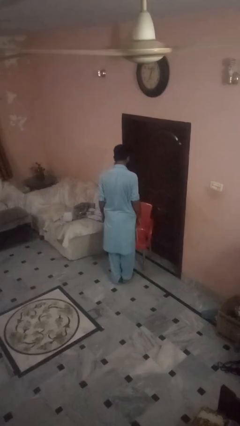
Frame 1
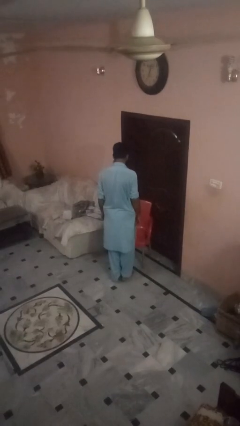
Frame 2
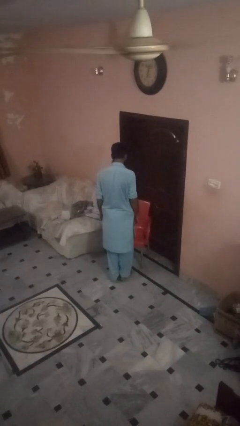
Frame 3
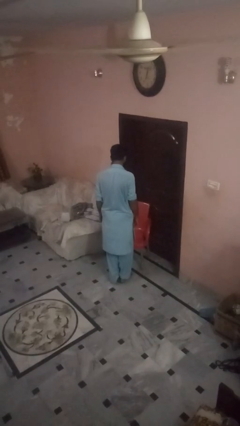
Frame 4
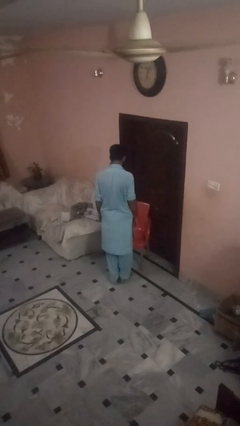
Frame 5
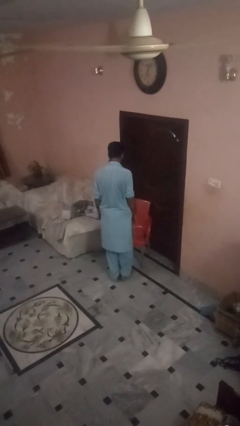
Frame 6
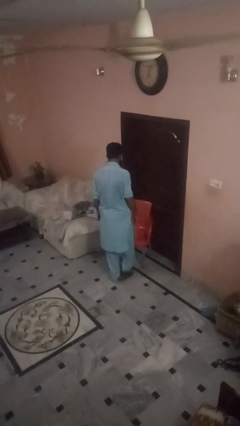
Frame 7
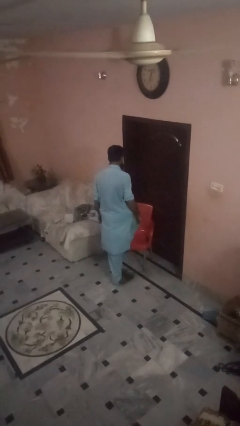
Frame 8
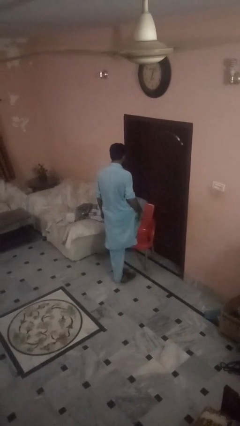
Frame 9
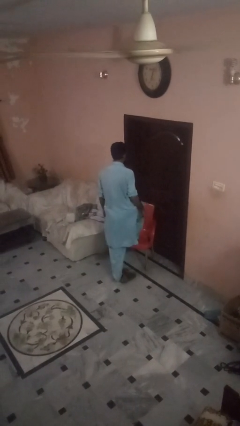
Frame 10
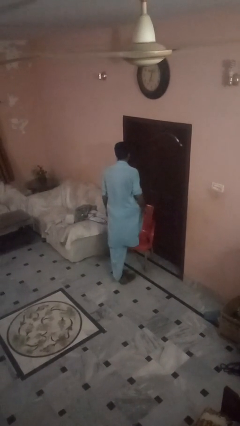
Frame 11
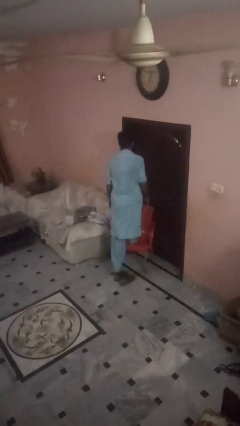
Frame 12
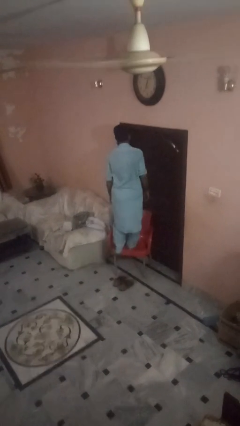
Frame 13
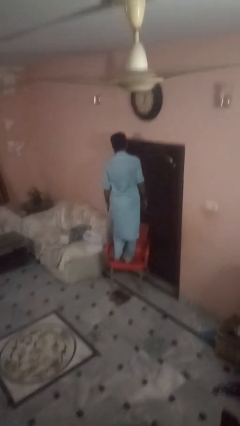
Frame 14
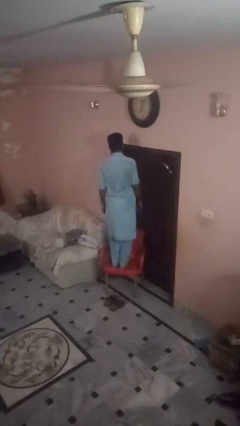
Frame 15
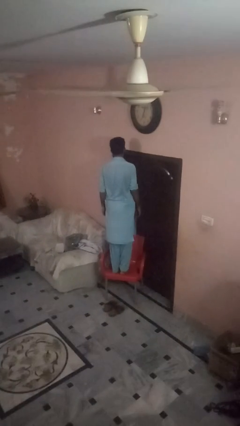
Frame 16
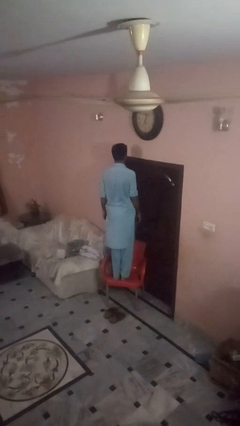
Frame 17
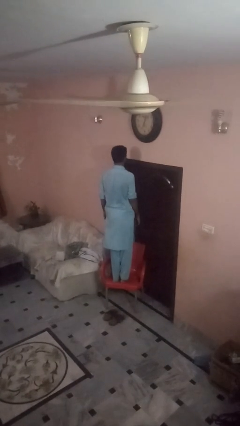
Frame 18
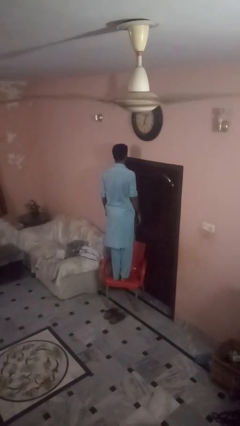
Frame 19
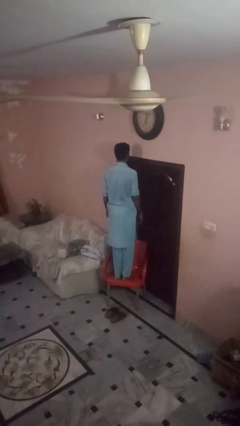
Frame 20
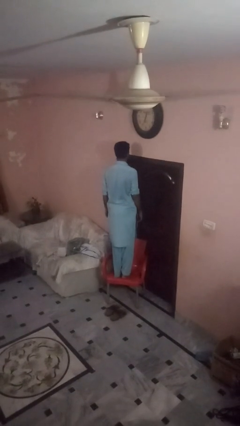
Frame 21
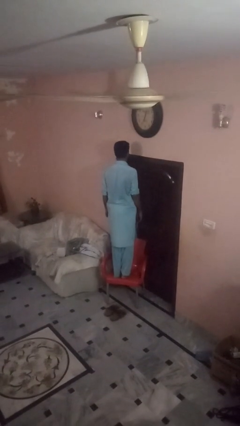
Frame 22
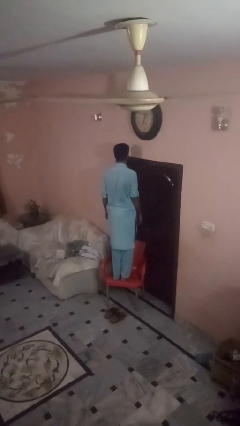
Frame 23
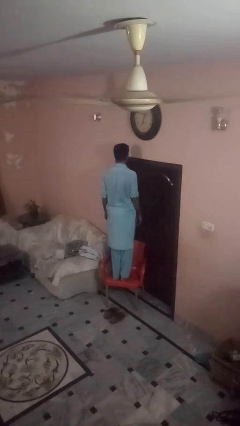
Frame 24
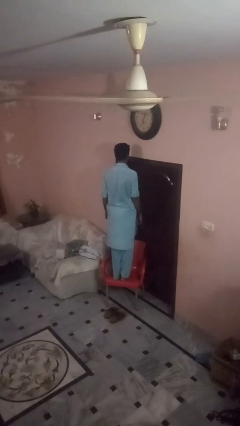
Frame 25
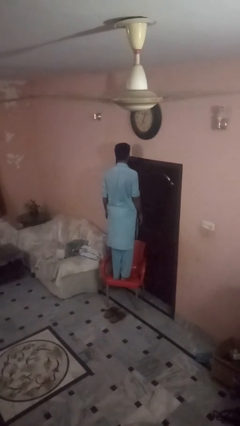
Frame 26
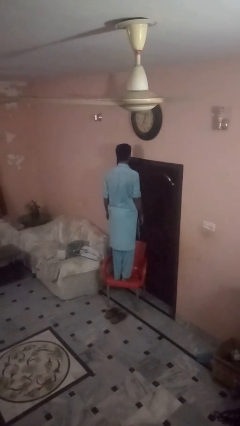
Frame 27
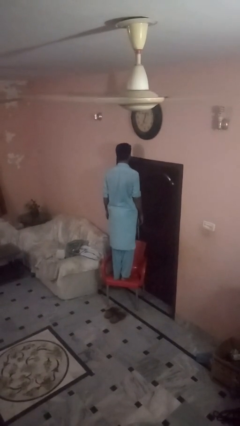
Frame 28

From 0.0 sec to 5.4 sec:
person climbs on chair

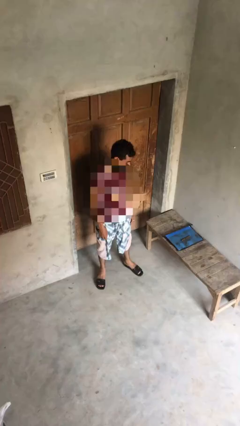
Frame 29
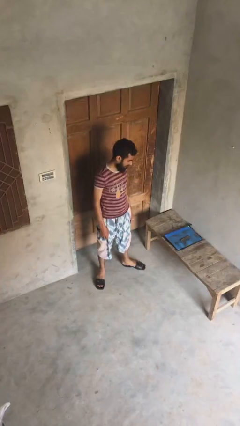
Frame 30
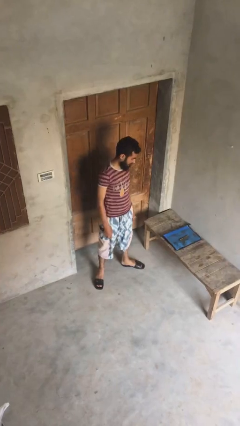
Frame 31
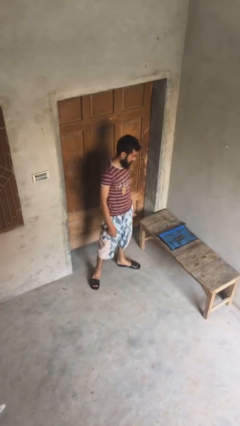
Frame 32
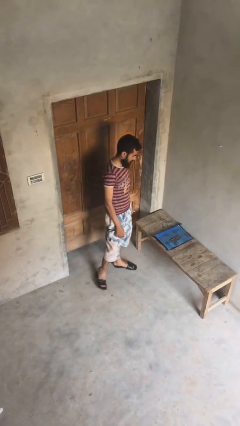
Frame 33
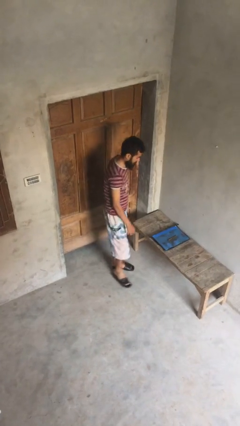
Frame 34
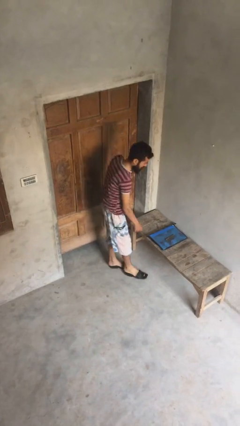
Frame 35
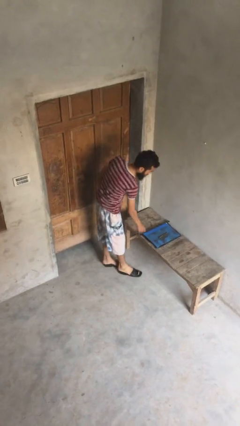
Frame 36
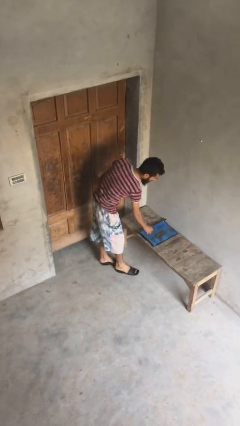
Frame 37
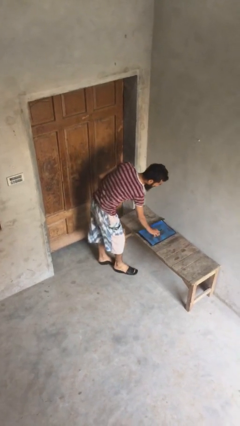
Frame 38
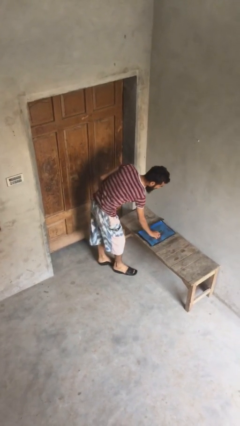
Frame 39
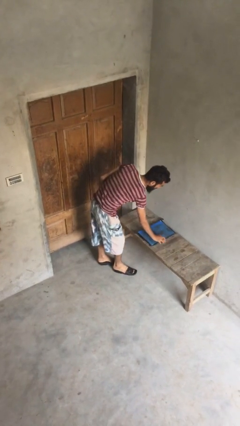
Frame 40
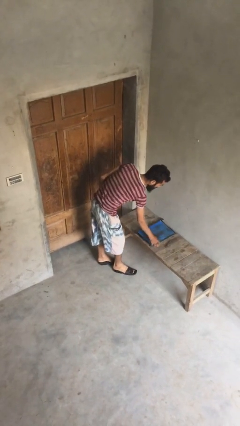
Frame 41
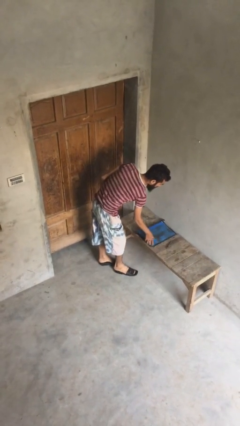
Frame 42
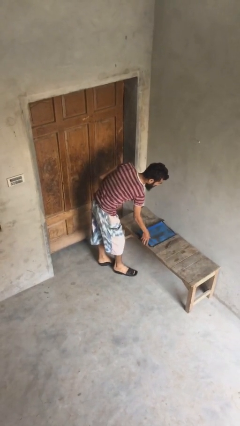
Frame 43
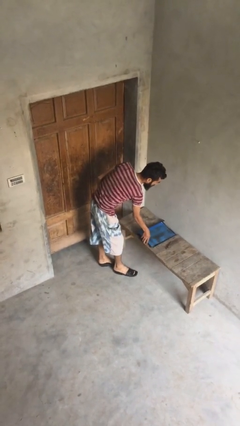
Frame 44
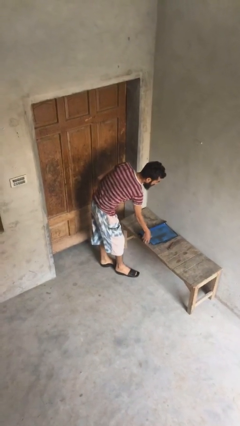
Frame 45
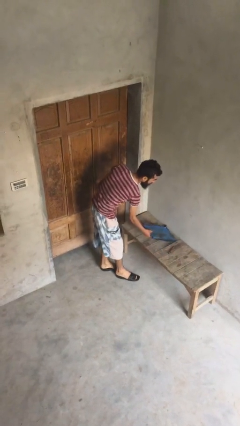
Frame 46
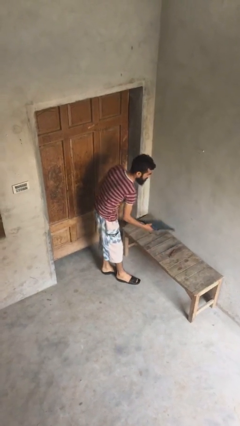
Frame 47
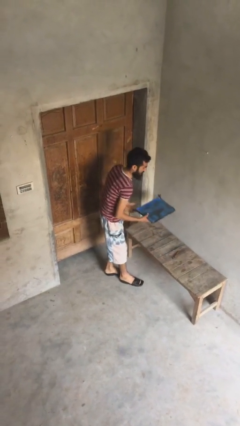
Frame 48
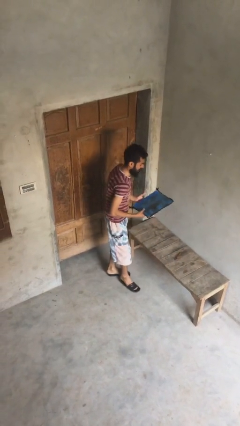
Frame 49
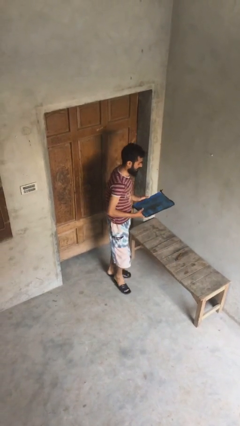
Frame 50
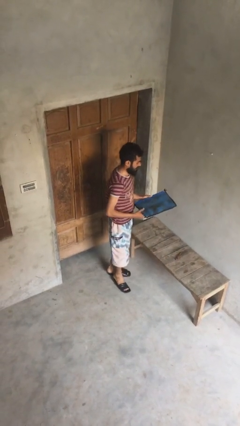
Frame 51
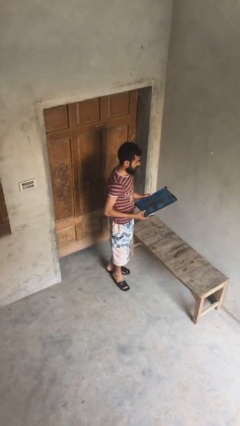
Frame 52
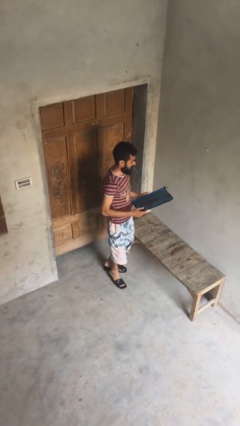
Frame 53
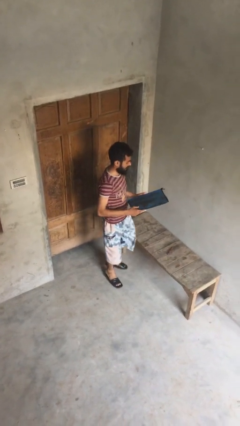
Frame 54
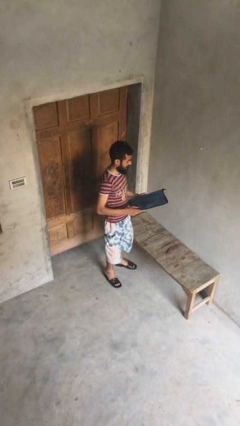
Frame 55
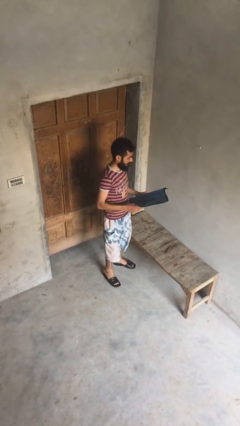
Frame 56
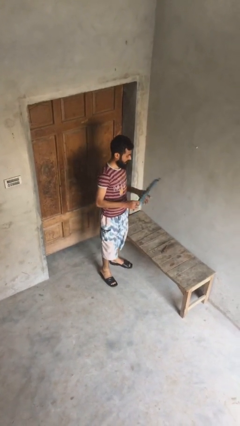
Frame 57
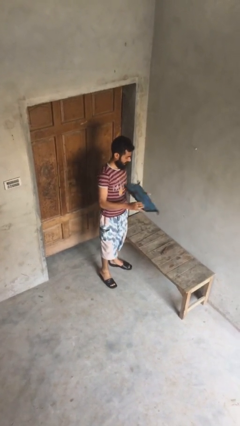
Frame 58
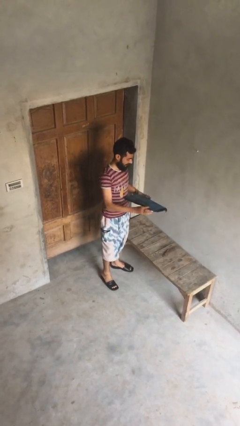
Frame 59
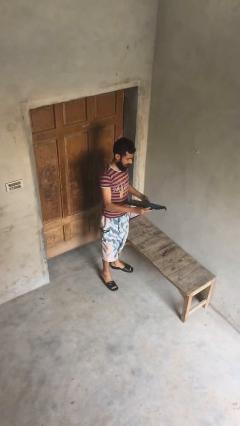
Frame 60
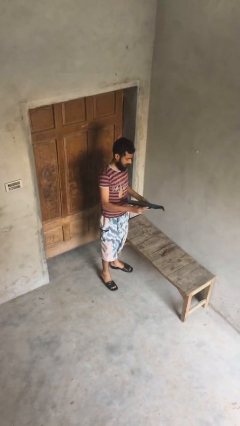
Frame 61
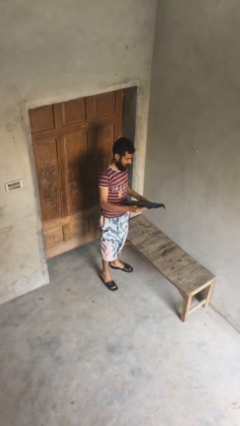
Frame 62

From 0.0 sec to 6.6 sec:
person picks up object from table

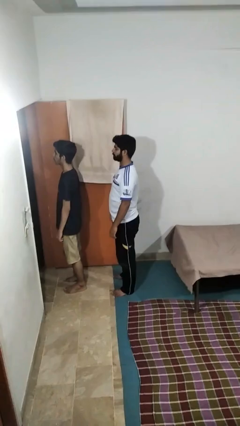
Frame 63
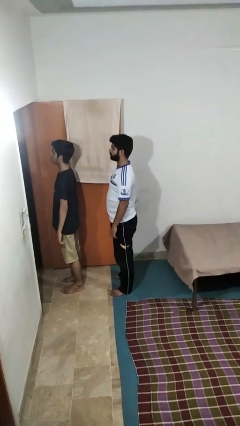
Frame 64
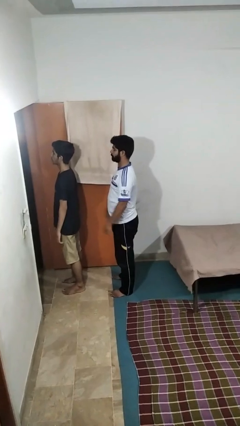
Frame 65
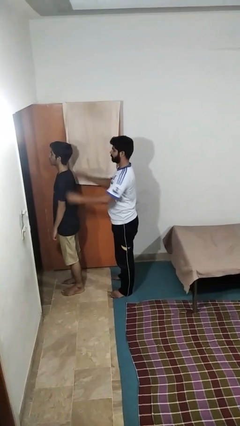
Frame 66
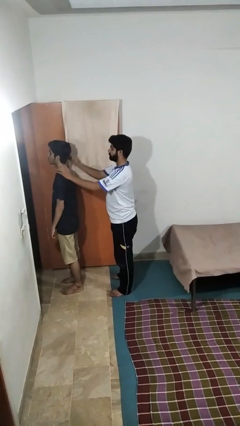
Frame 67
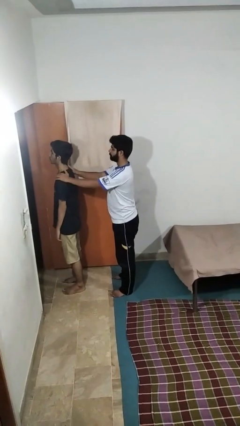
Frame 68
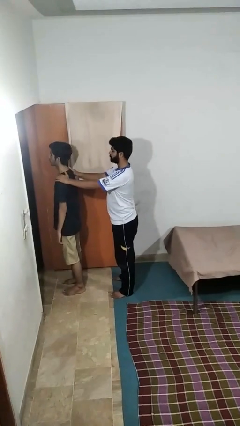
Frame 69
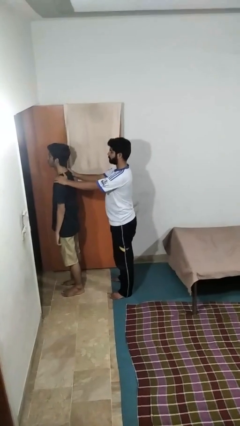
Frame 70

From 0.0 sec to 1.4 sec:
person grabs person by shoulder

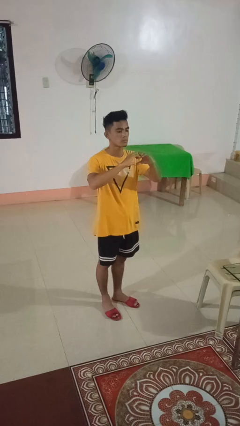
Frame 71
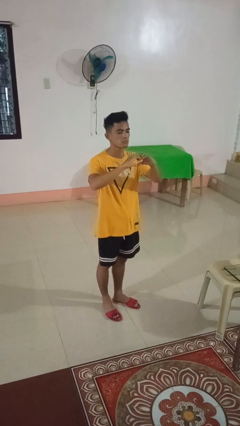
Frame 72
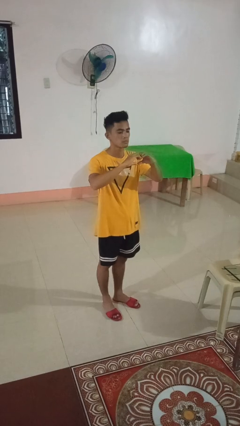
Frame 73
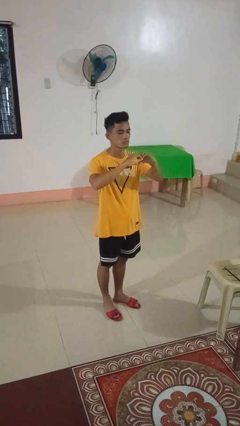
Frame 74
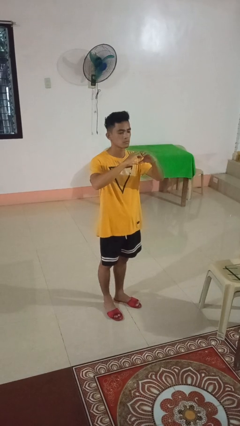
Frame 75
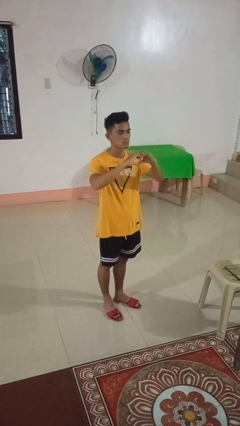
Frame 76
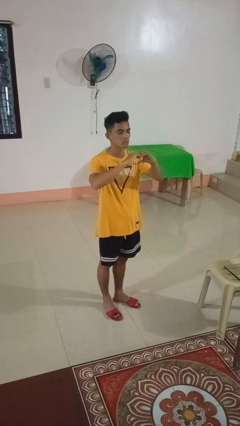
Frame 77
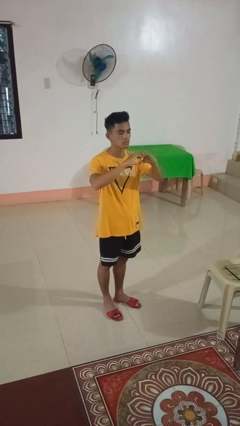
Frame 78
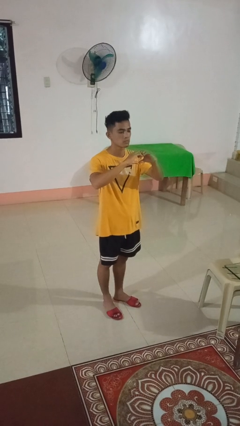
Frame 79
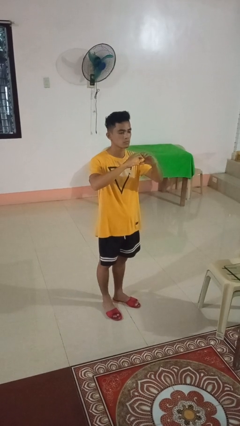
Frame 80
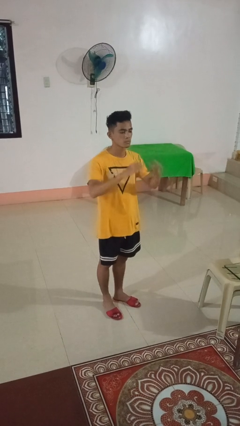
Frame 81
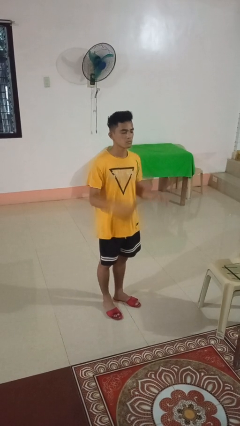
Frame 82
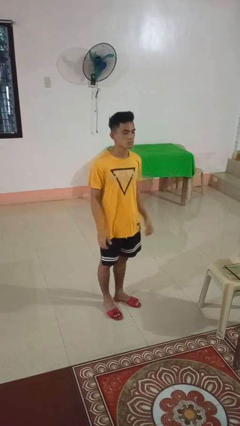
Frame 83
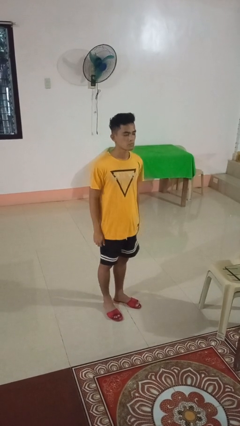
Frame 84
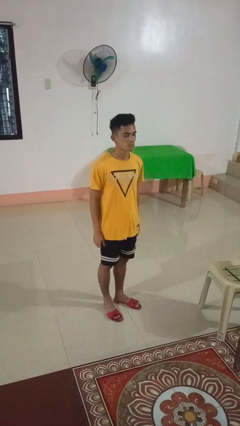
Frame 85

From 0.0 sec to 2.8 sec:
person gestures heart

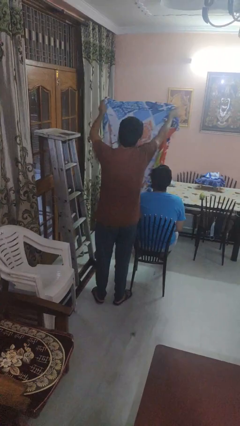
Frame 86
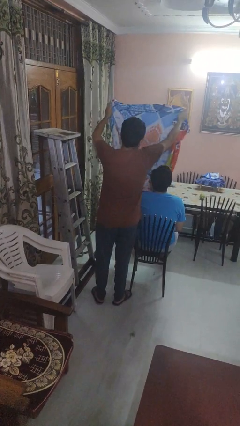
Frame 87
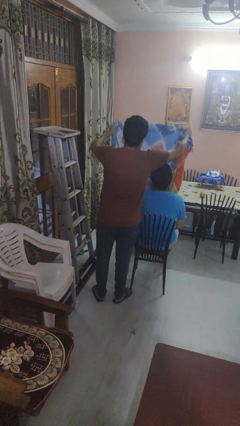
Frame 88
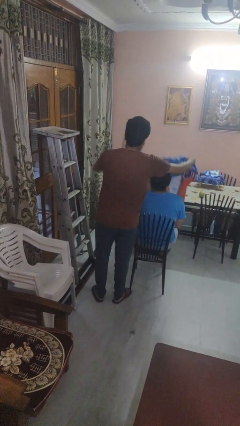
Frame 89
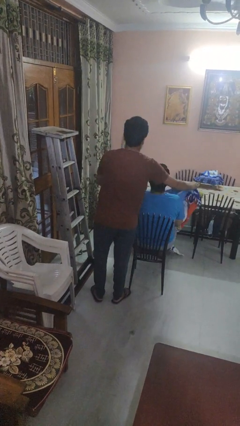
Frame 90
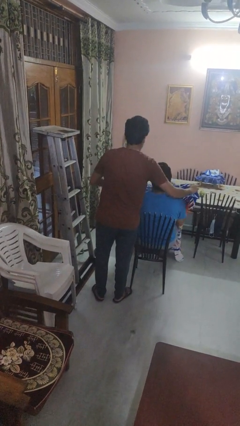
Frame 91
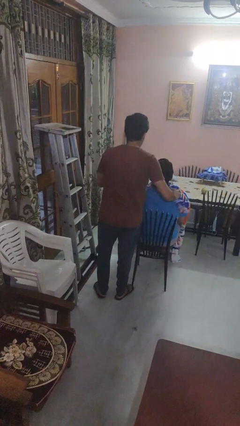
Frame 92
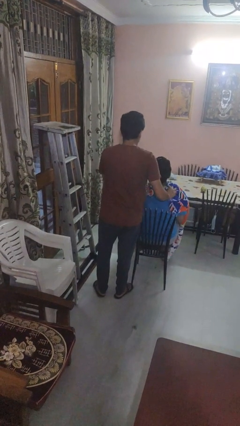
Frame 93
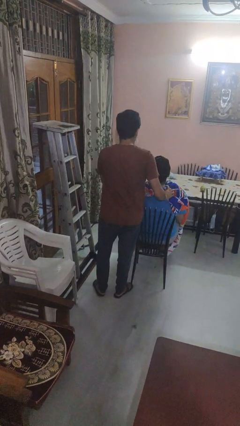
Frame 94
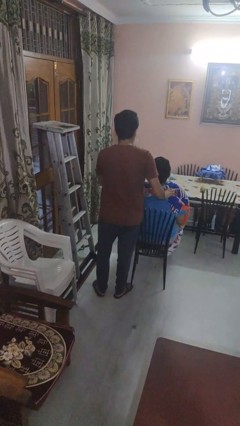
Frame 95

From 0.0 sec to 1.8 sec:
person covers friend with blanket
